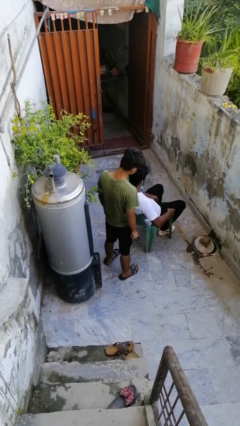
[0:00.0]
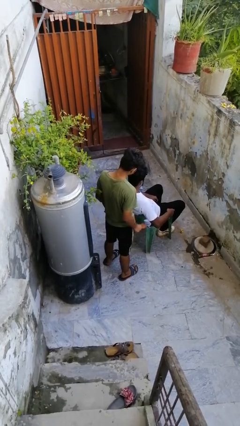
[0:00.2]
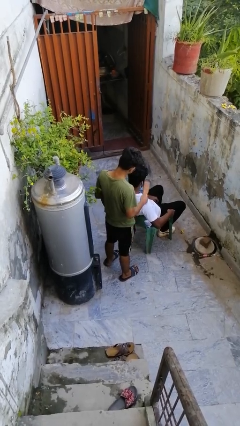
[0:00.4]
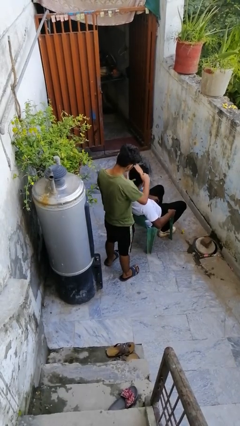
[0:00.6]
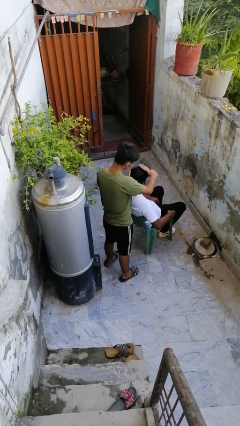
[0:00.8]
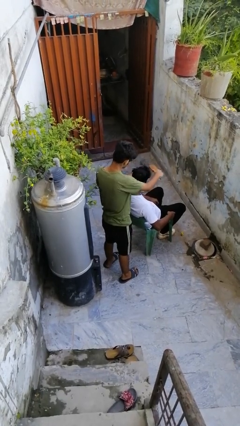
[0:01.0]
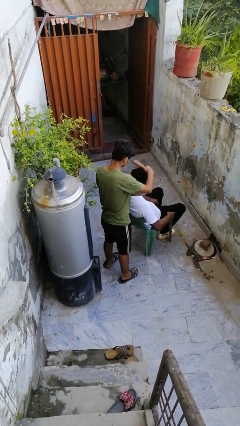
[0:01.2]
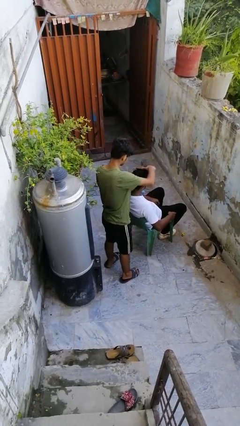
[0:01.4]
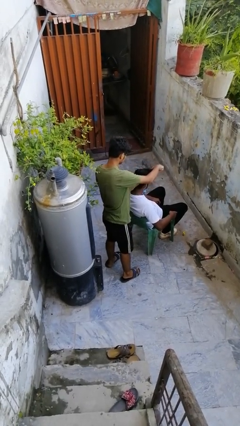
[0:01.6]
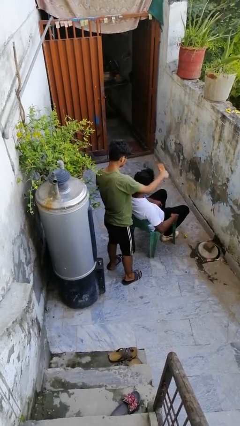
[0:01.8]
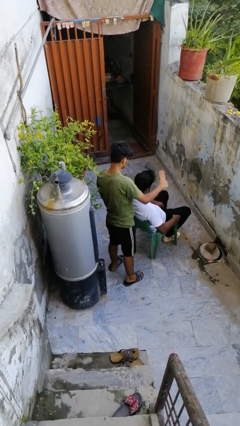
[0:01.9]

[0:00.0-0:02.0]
person brushes hair of person

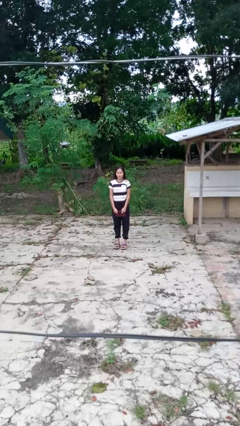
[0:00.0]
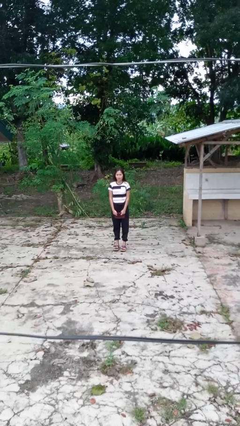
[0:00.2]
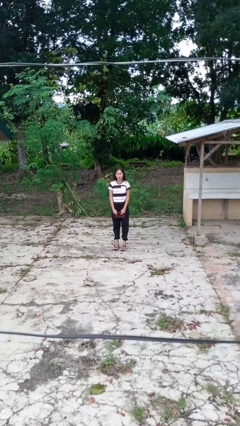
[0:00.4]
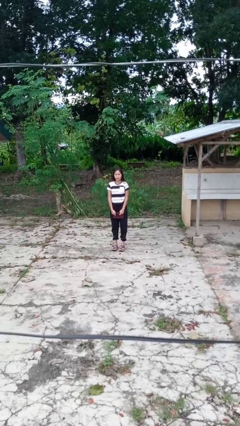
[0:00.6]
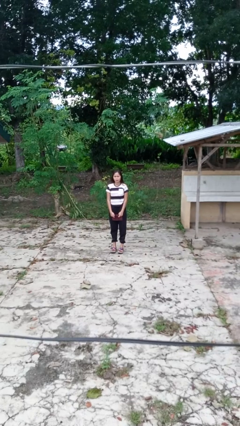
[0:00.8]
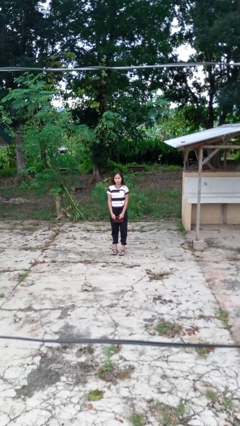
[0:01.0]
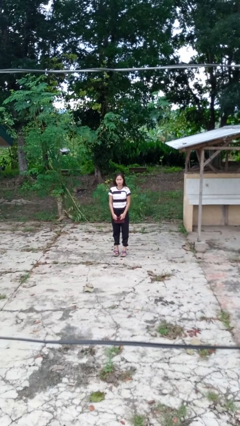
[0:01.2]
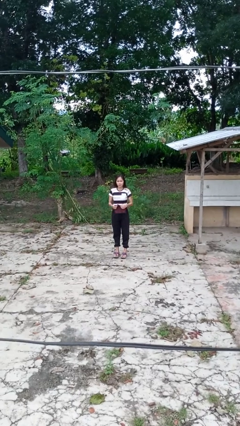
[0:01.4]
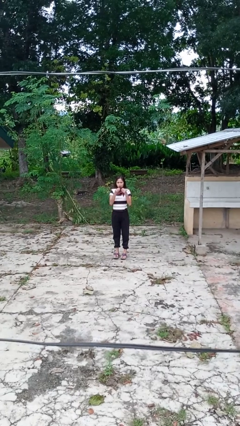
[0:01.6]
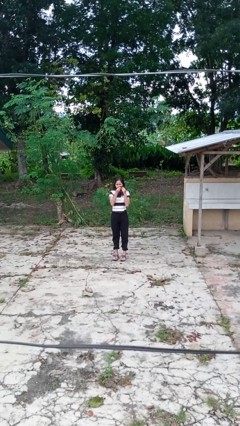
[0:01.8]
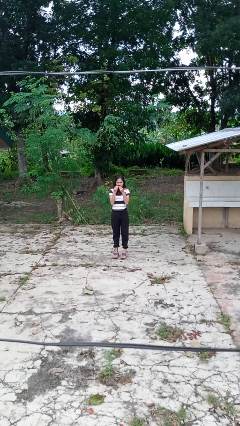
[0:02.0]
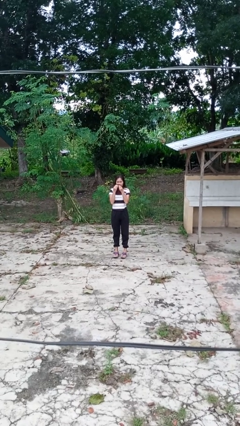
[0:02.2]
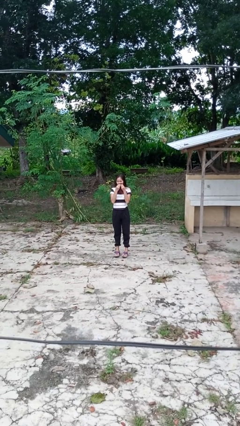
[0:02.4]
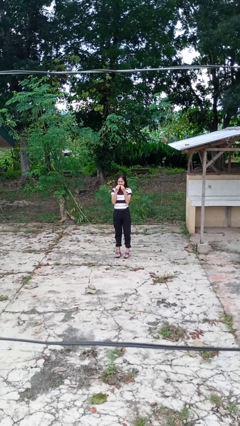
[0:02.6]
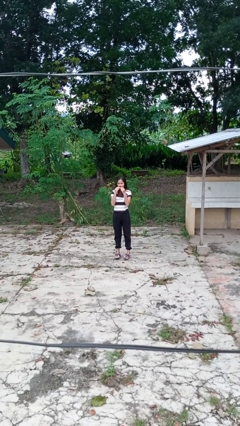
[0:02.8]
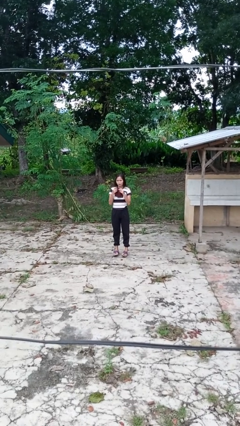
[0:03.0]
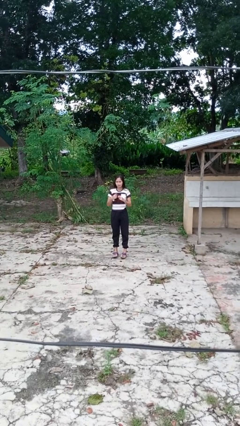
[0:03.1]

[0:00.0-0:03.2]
person wipes mouth with napkin

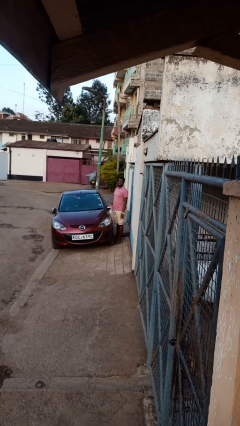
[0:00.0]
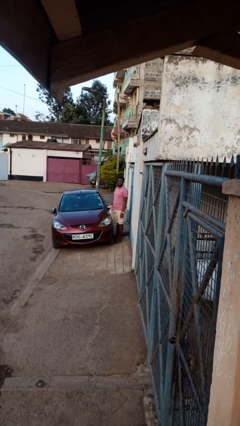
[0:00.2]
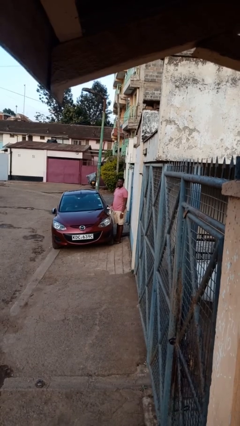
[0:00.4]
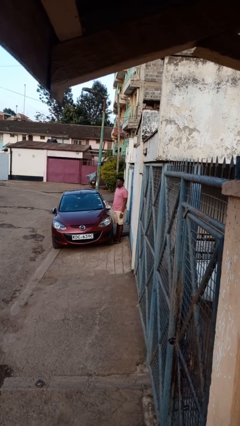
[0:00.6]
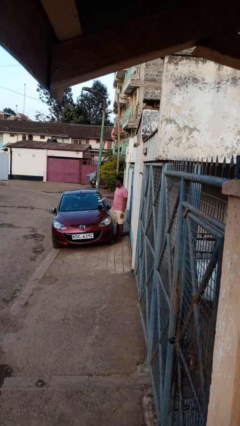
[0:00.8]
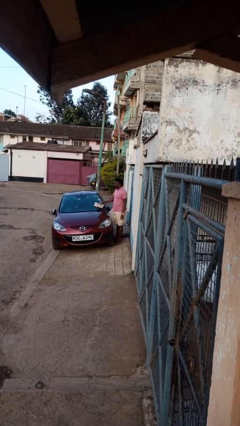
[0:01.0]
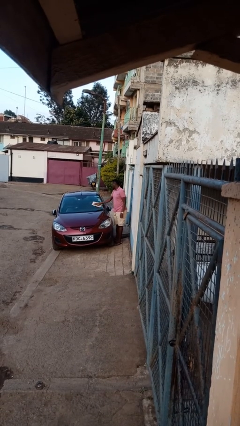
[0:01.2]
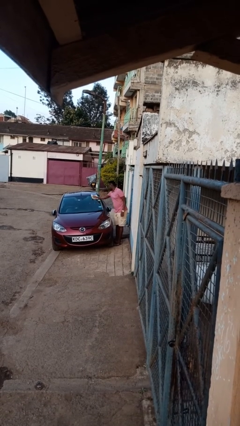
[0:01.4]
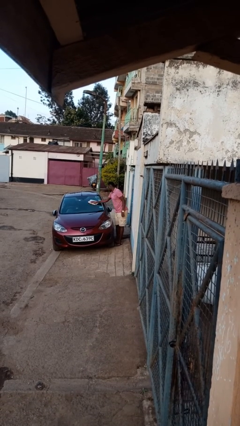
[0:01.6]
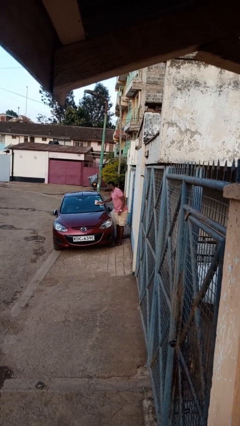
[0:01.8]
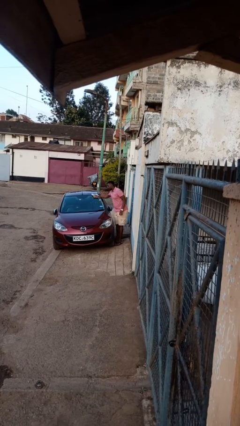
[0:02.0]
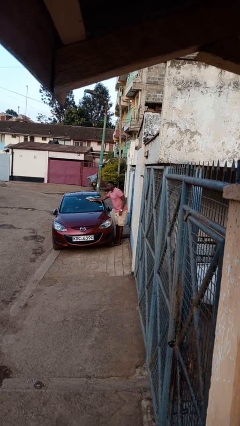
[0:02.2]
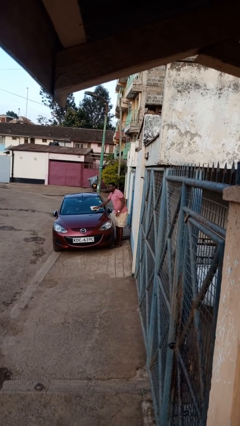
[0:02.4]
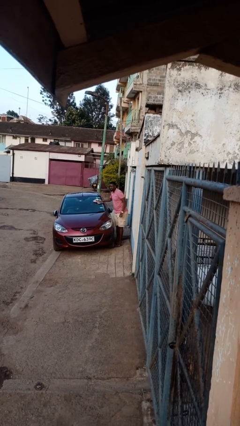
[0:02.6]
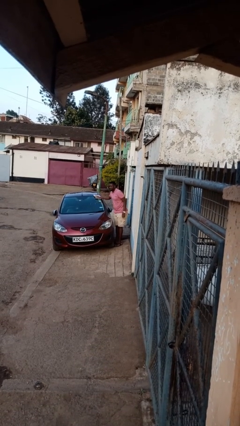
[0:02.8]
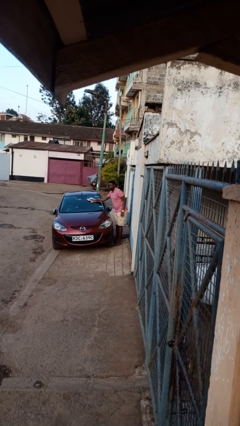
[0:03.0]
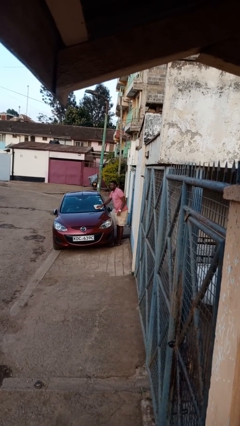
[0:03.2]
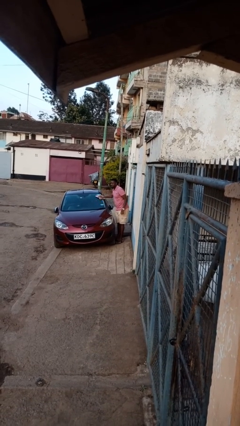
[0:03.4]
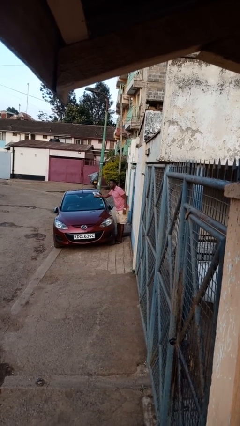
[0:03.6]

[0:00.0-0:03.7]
person polishes car with rag

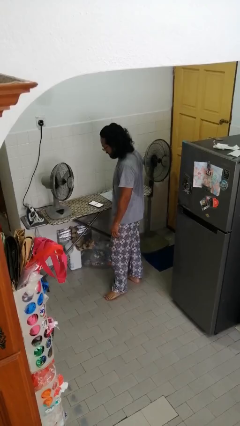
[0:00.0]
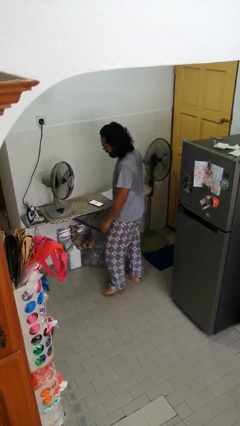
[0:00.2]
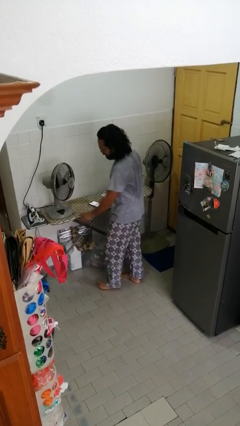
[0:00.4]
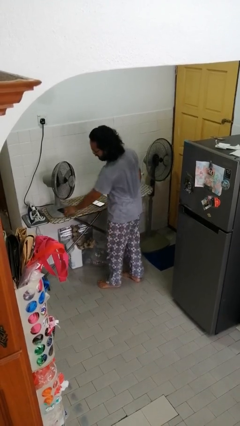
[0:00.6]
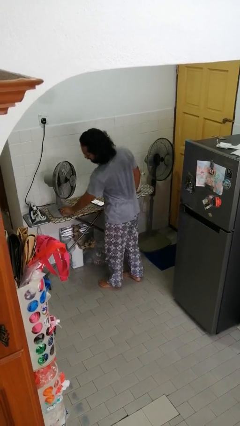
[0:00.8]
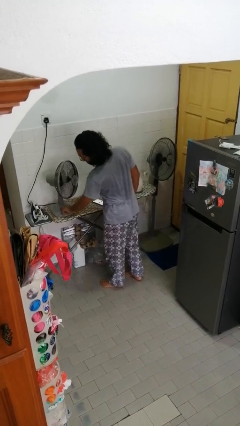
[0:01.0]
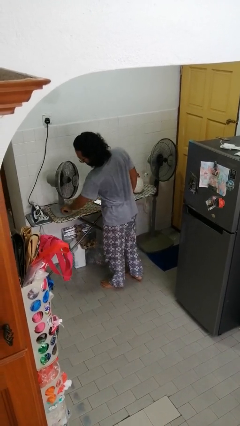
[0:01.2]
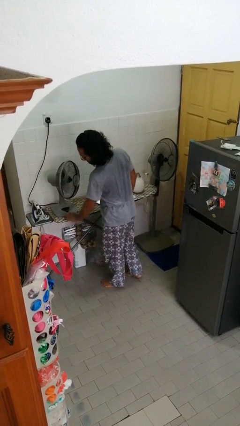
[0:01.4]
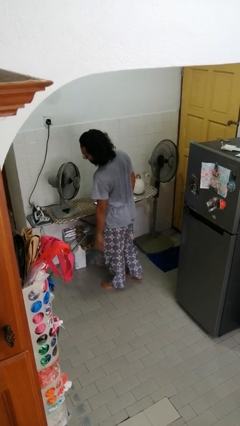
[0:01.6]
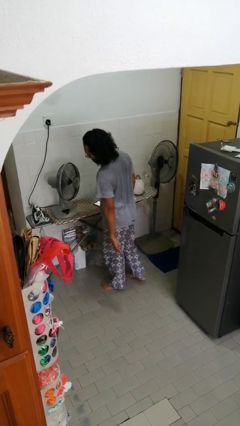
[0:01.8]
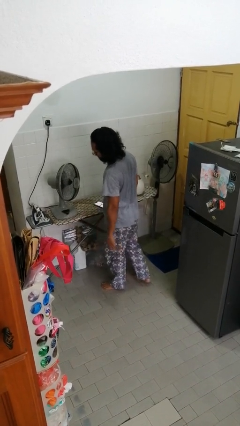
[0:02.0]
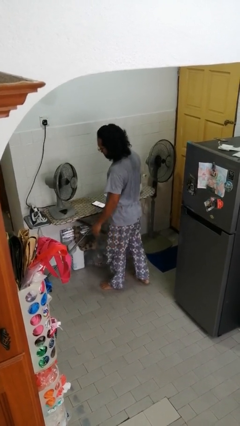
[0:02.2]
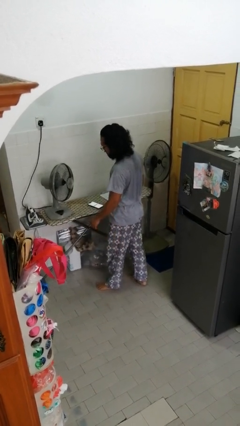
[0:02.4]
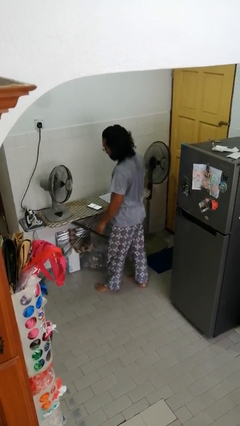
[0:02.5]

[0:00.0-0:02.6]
person turns on fan

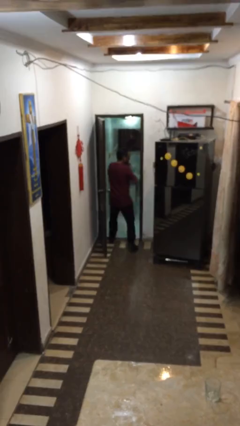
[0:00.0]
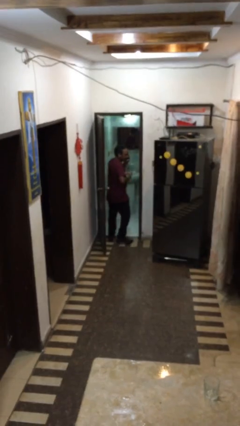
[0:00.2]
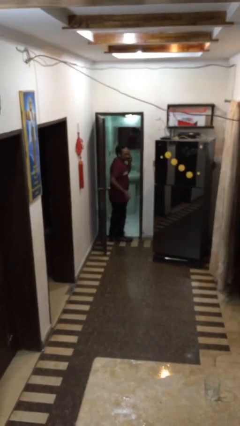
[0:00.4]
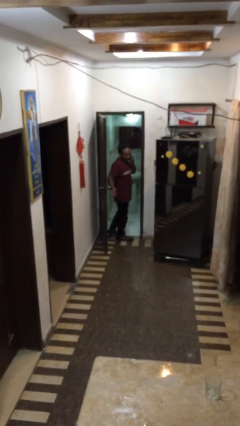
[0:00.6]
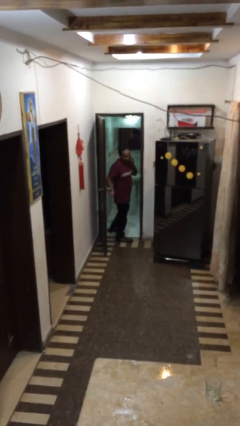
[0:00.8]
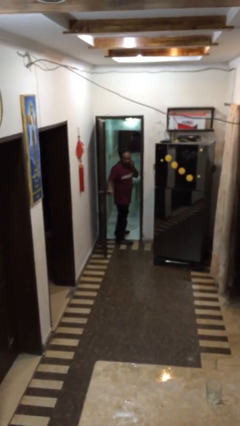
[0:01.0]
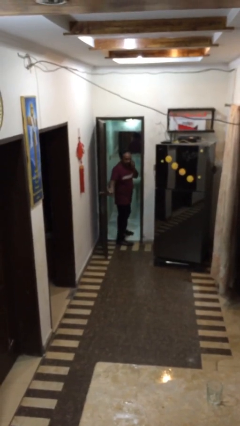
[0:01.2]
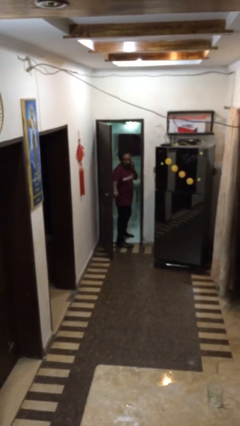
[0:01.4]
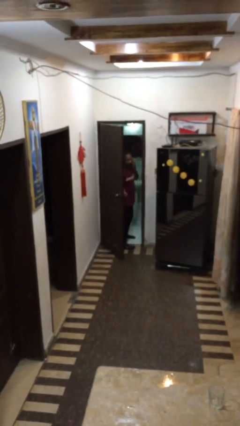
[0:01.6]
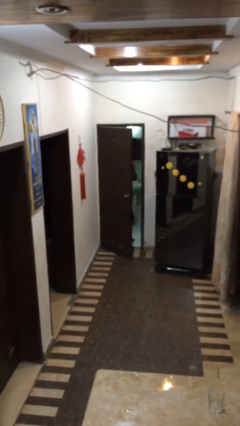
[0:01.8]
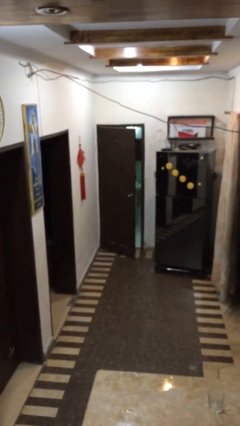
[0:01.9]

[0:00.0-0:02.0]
person closes facility door

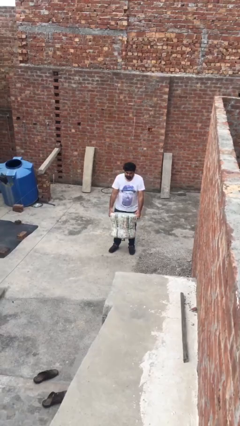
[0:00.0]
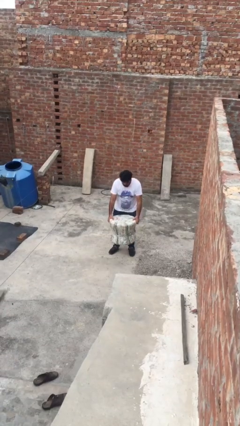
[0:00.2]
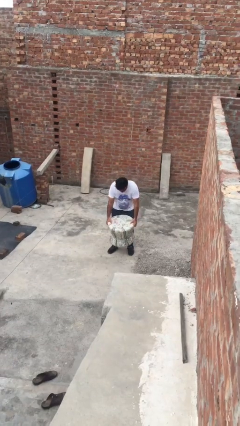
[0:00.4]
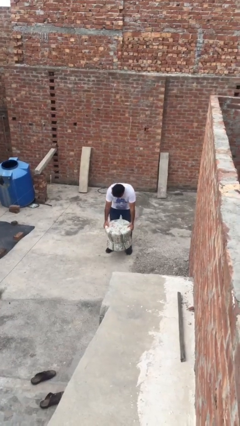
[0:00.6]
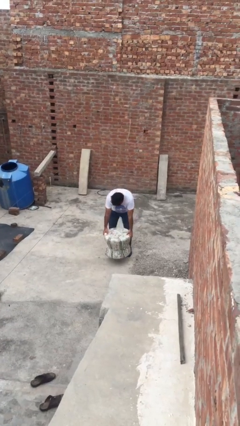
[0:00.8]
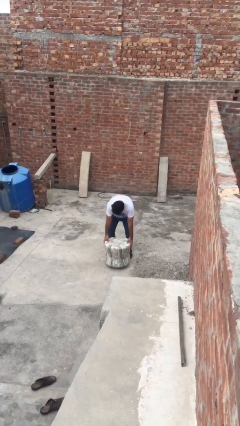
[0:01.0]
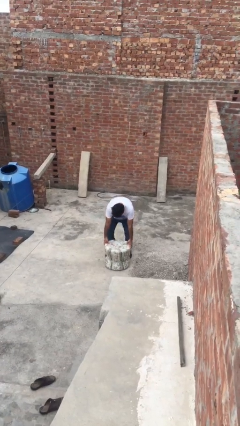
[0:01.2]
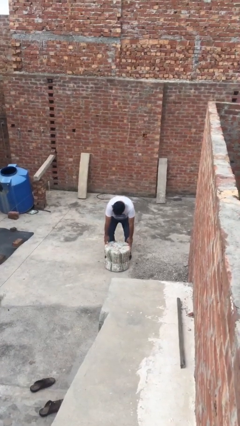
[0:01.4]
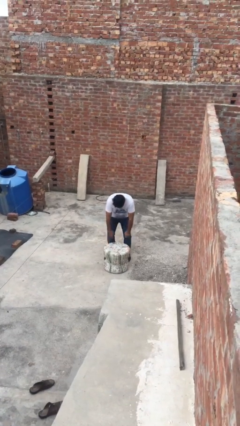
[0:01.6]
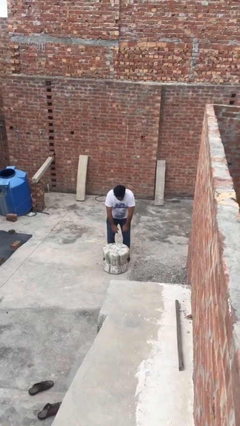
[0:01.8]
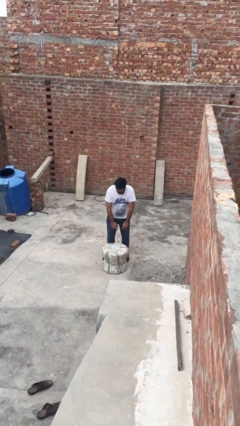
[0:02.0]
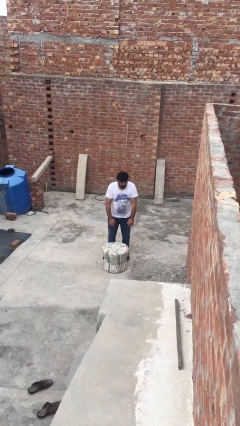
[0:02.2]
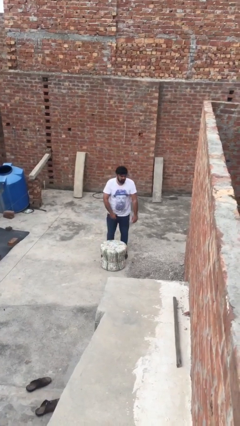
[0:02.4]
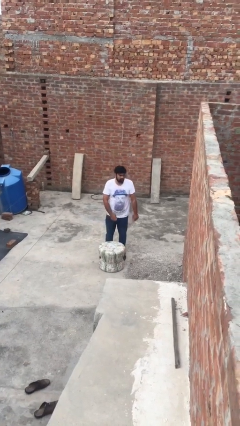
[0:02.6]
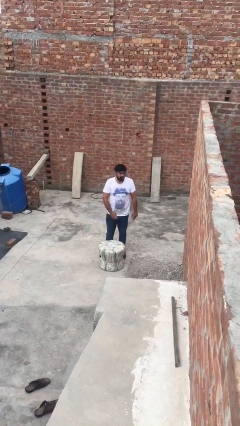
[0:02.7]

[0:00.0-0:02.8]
person puts down object on floor

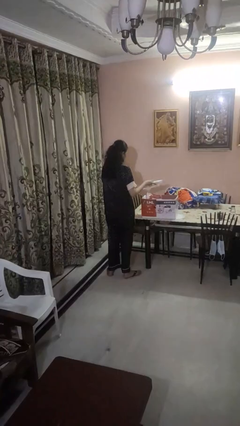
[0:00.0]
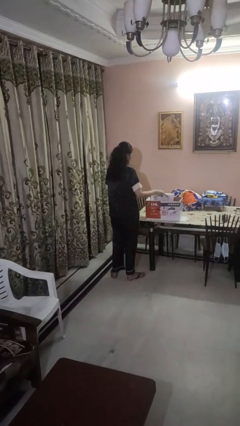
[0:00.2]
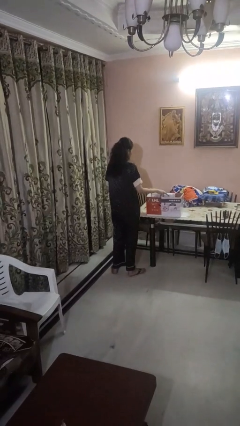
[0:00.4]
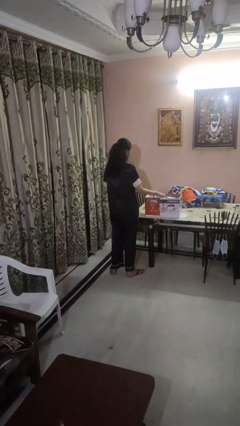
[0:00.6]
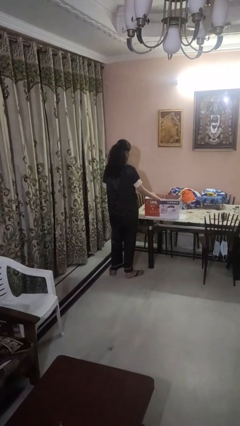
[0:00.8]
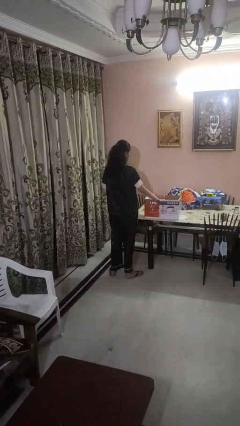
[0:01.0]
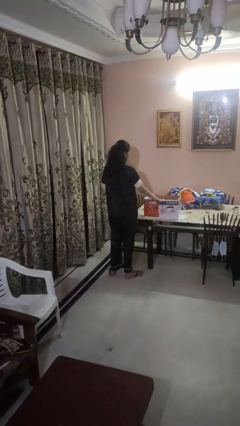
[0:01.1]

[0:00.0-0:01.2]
person puts object into box
